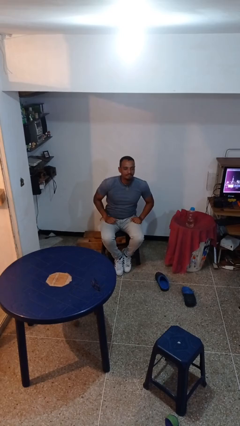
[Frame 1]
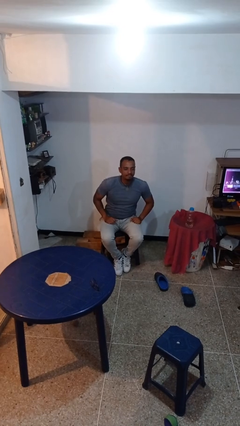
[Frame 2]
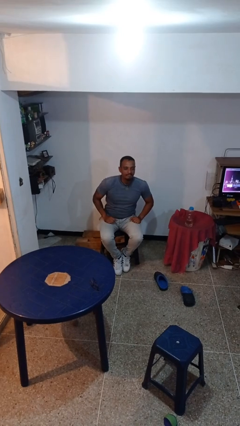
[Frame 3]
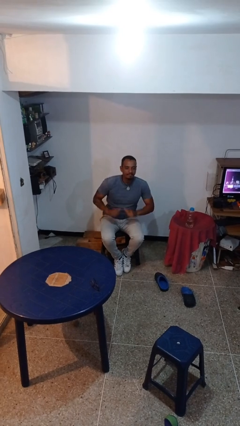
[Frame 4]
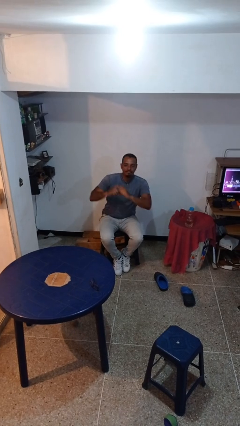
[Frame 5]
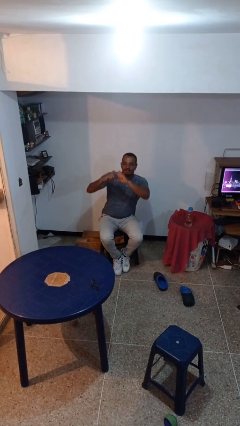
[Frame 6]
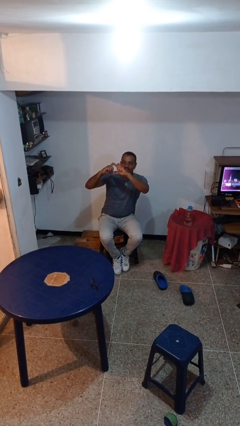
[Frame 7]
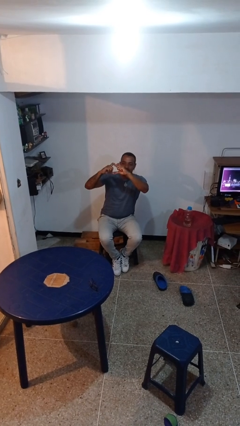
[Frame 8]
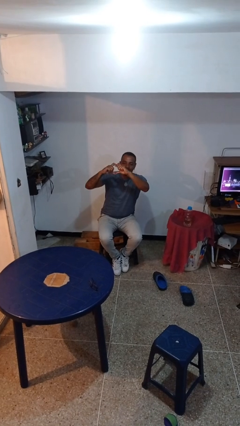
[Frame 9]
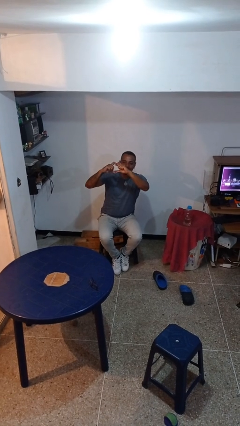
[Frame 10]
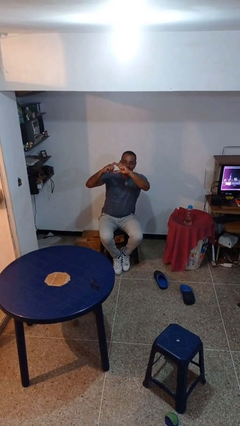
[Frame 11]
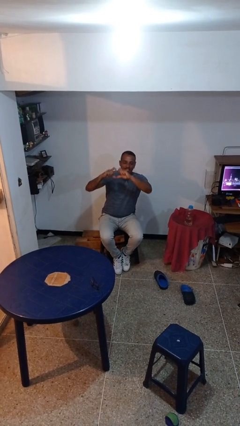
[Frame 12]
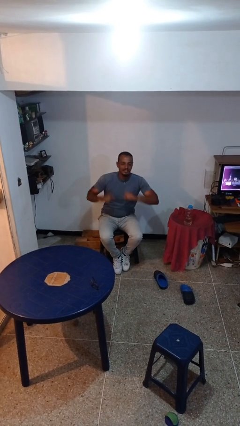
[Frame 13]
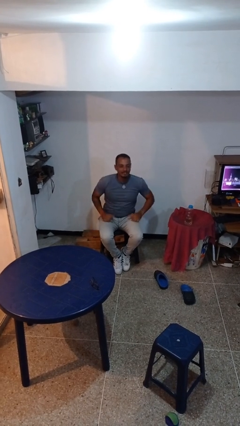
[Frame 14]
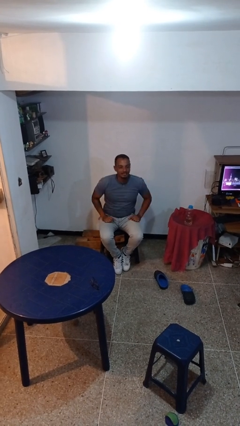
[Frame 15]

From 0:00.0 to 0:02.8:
person gestures heart

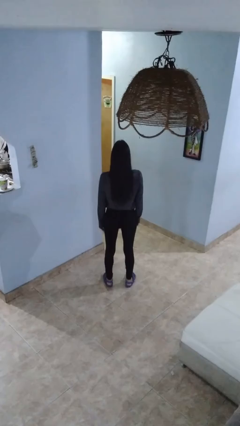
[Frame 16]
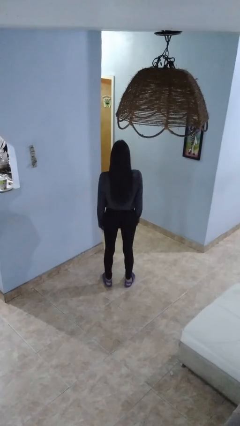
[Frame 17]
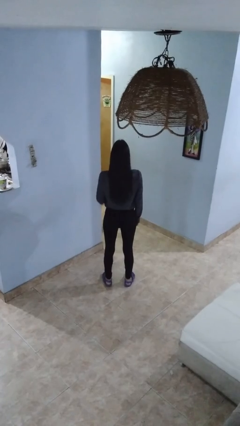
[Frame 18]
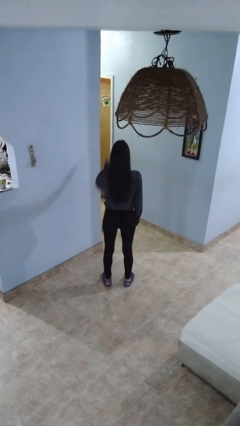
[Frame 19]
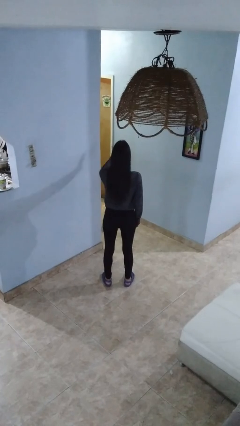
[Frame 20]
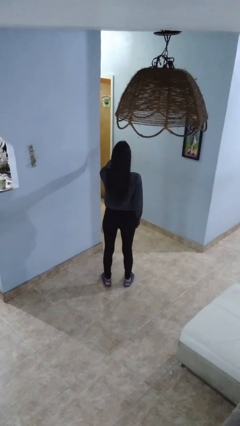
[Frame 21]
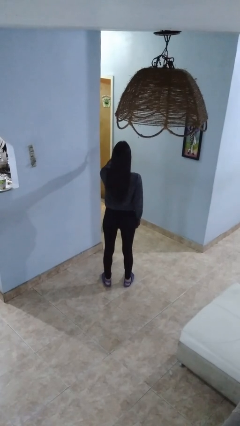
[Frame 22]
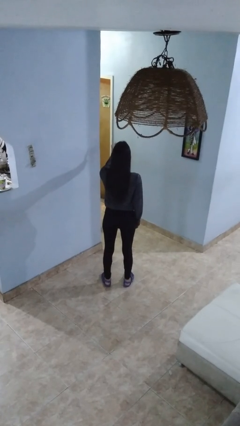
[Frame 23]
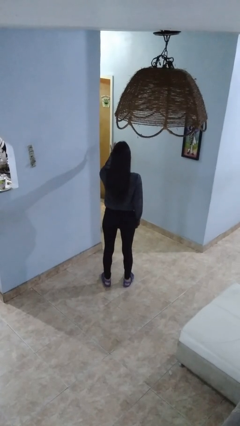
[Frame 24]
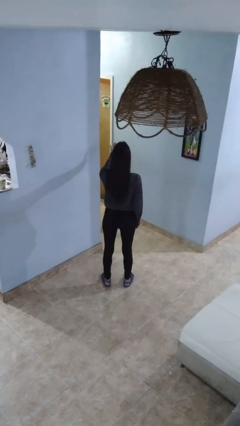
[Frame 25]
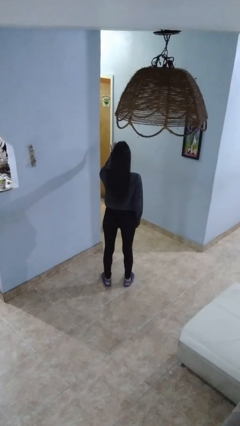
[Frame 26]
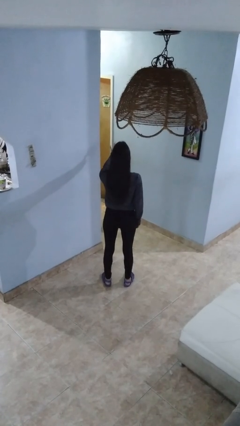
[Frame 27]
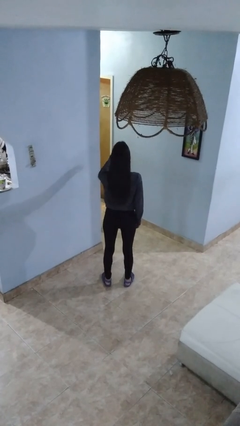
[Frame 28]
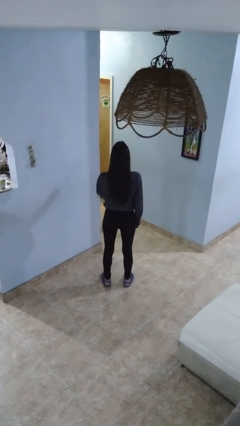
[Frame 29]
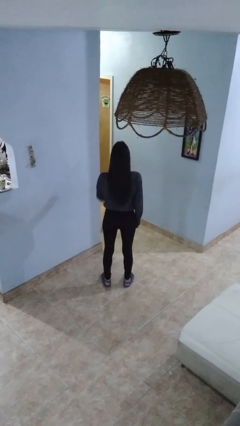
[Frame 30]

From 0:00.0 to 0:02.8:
person gestures stop

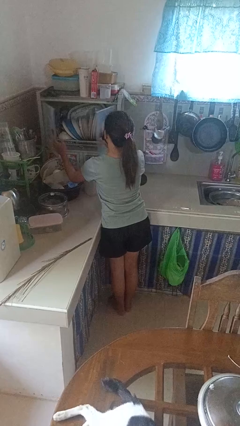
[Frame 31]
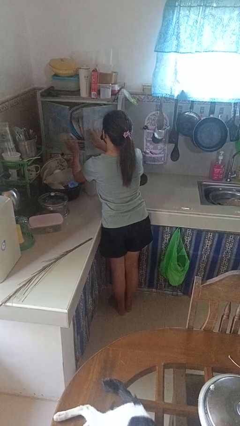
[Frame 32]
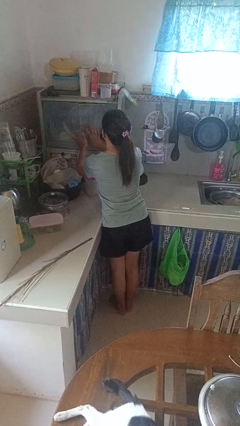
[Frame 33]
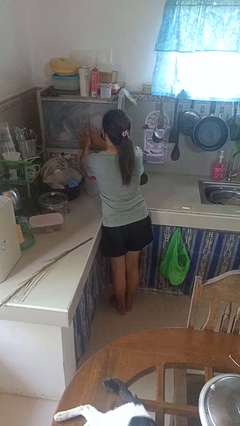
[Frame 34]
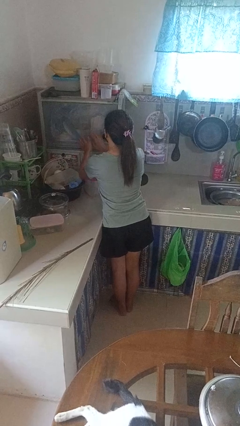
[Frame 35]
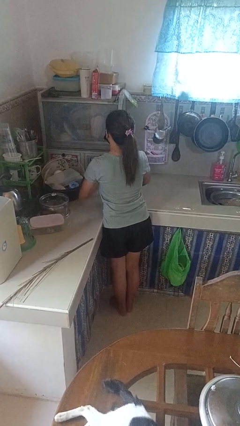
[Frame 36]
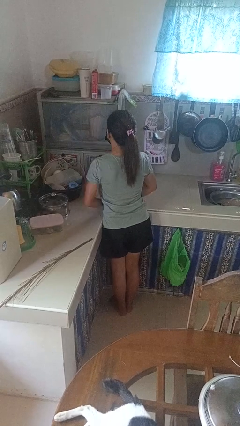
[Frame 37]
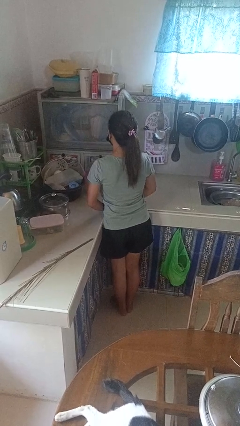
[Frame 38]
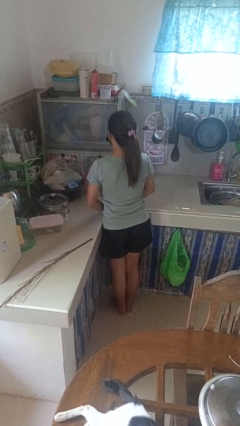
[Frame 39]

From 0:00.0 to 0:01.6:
person closes kitchen drawer

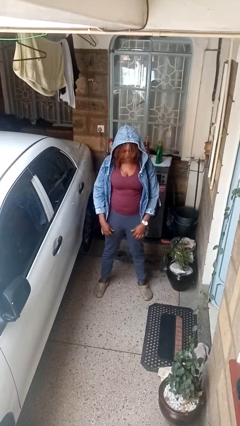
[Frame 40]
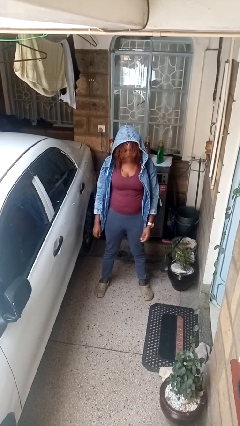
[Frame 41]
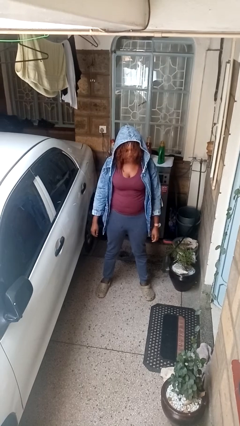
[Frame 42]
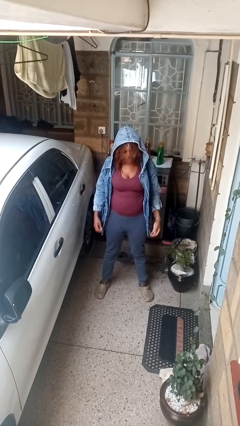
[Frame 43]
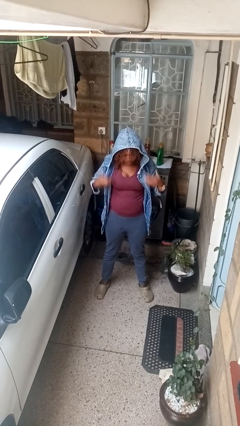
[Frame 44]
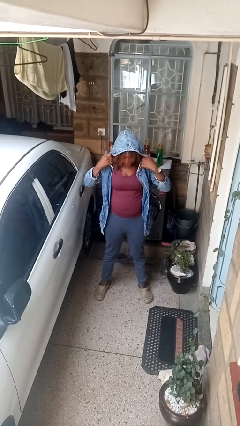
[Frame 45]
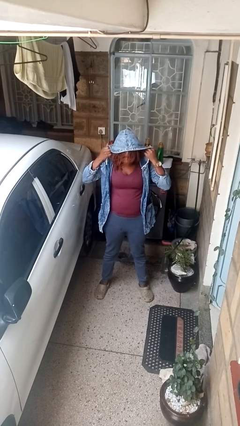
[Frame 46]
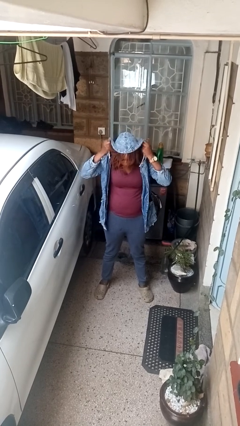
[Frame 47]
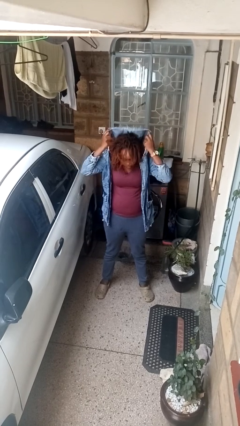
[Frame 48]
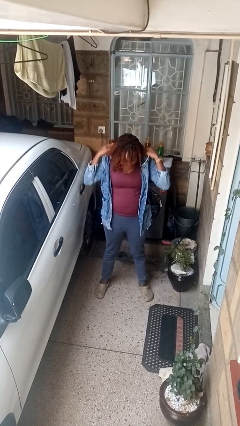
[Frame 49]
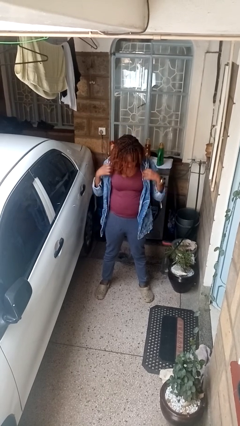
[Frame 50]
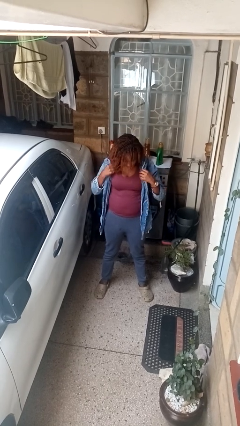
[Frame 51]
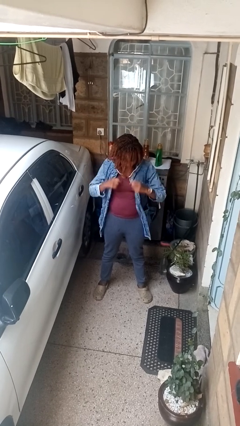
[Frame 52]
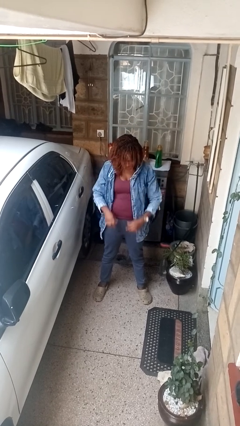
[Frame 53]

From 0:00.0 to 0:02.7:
person takes off hoodie

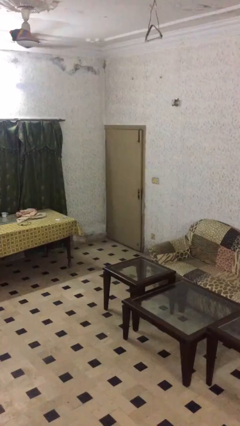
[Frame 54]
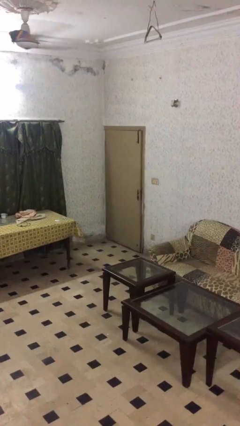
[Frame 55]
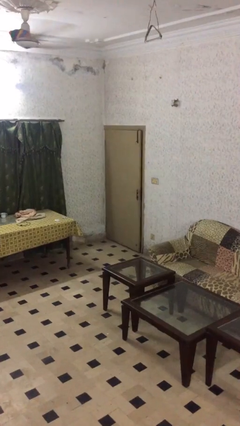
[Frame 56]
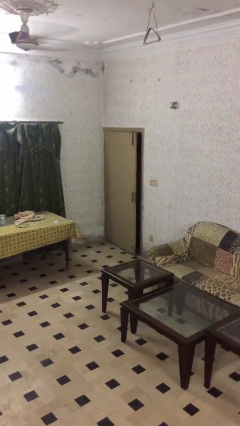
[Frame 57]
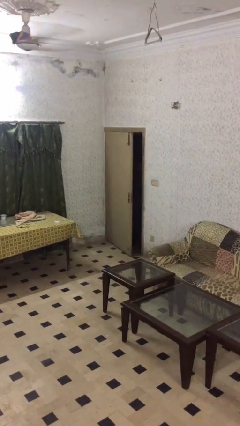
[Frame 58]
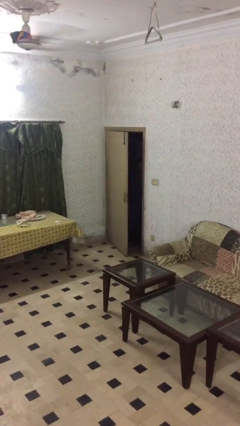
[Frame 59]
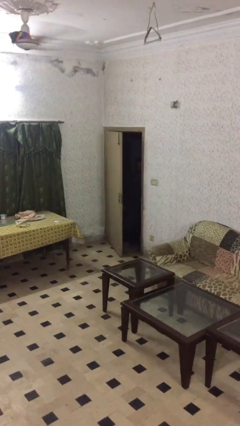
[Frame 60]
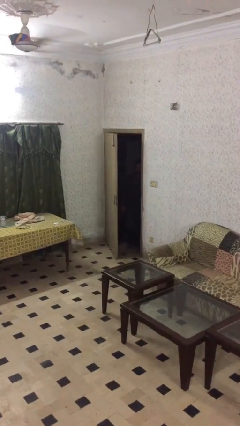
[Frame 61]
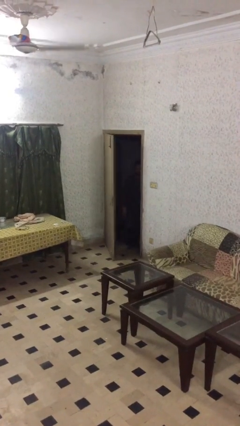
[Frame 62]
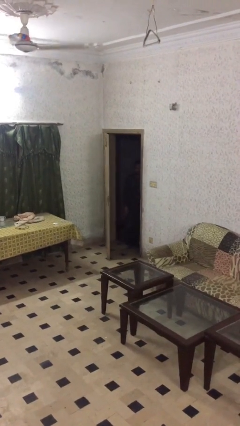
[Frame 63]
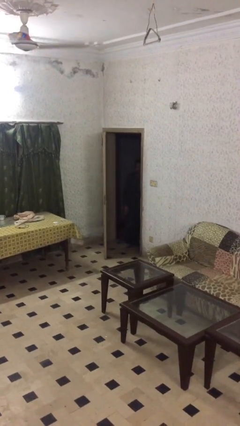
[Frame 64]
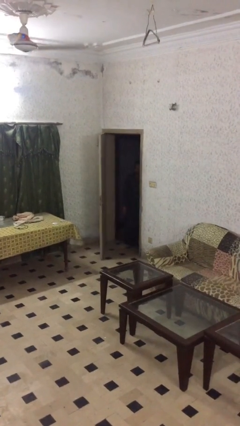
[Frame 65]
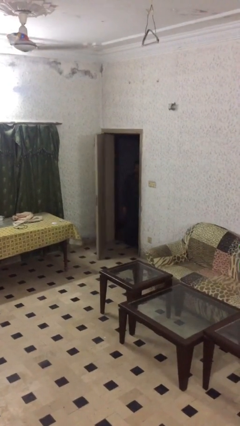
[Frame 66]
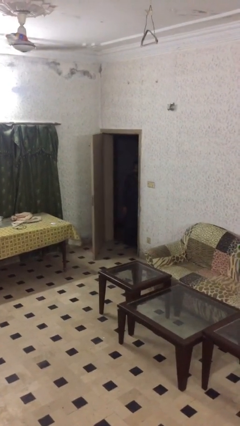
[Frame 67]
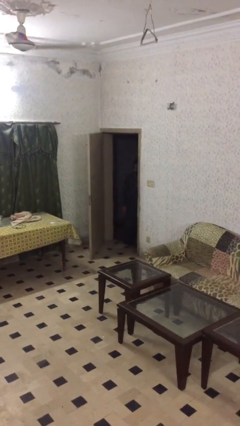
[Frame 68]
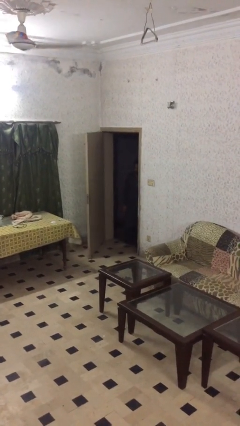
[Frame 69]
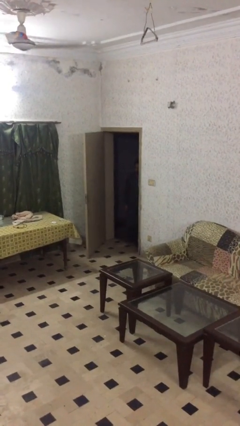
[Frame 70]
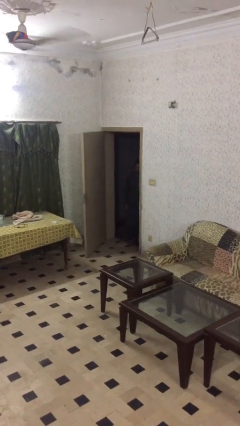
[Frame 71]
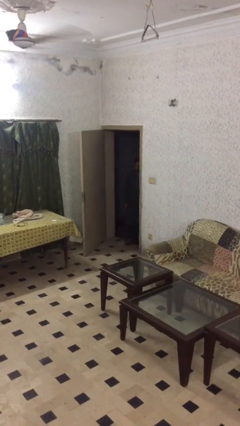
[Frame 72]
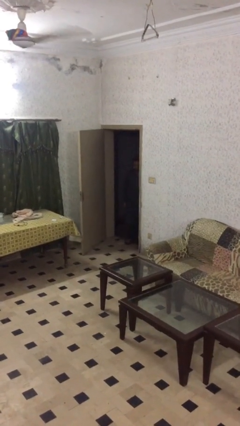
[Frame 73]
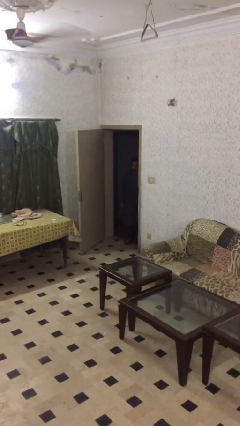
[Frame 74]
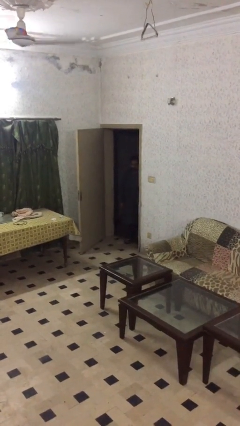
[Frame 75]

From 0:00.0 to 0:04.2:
person opens facility door

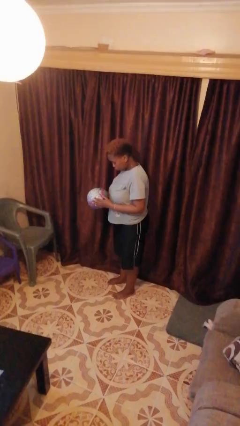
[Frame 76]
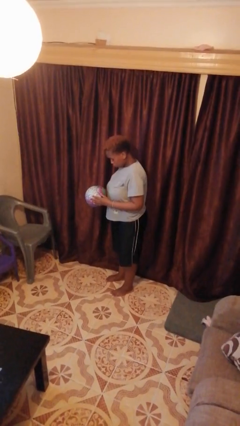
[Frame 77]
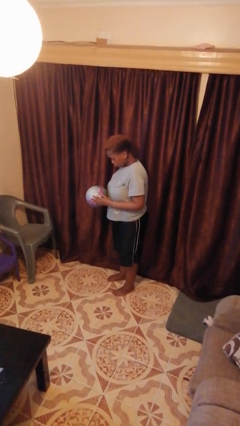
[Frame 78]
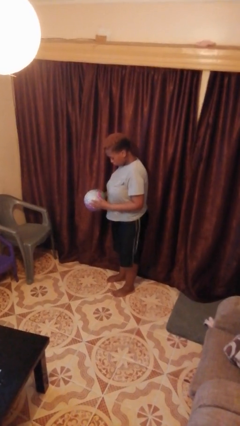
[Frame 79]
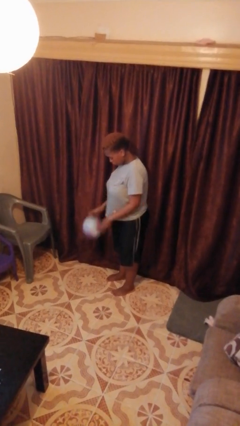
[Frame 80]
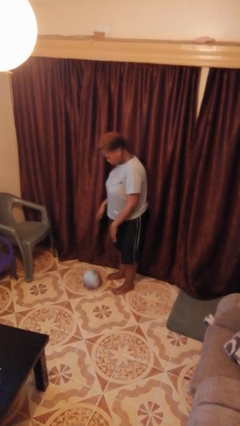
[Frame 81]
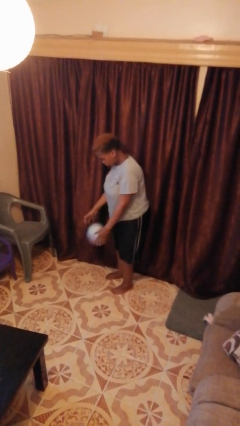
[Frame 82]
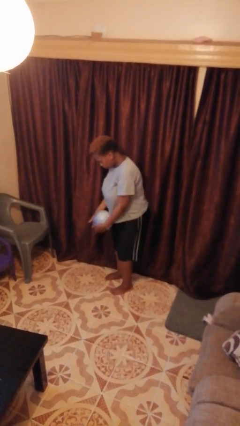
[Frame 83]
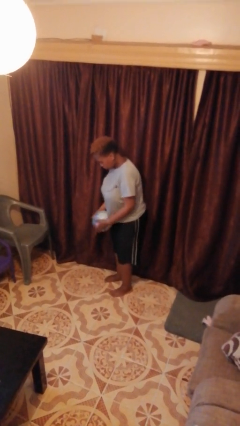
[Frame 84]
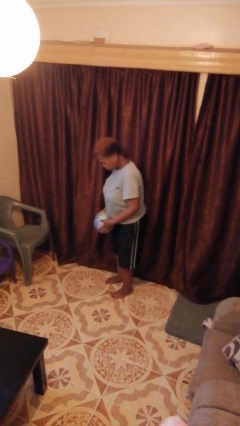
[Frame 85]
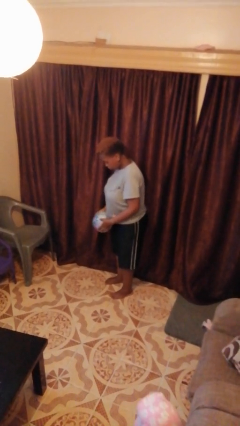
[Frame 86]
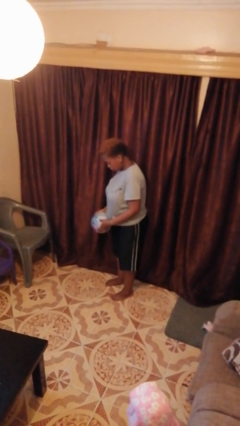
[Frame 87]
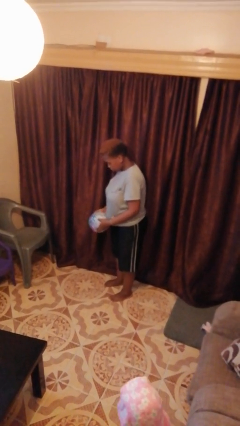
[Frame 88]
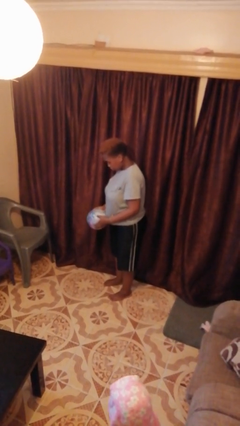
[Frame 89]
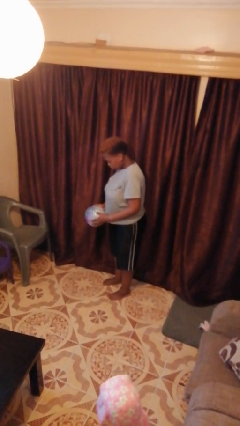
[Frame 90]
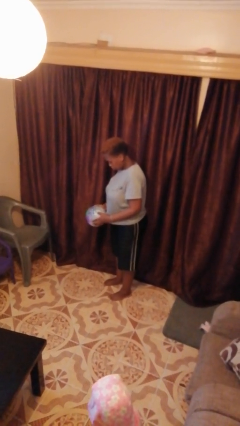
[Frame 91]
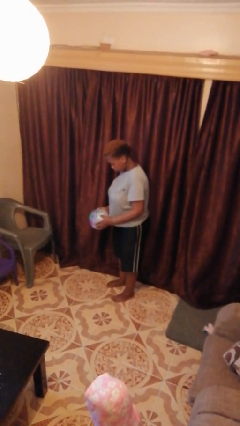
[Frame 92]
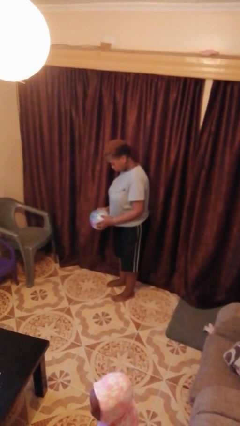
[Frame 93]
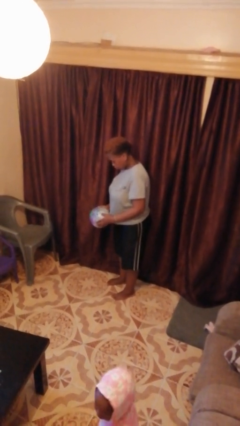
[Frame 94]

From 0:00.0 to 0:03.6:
person bounces ball on floor
